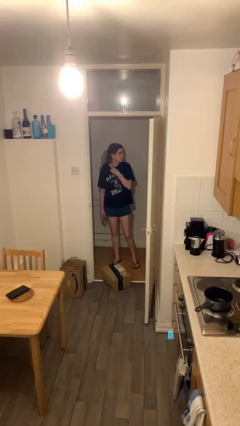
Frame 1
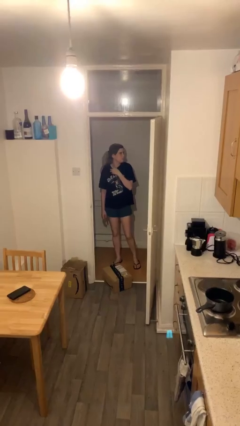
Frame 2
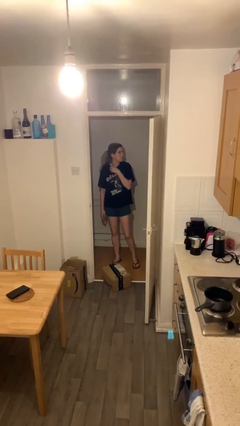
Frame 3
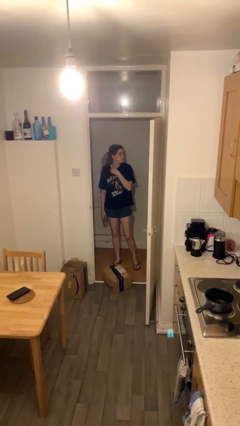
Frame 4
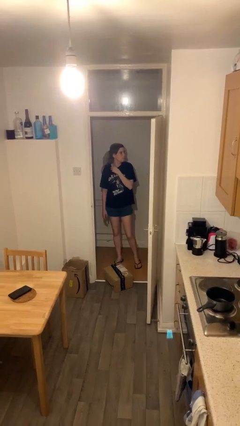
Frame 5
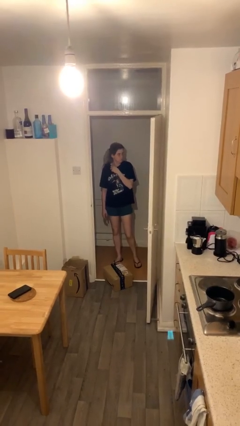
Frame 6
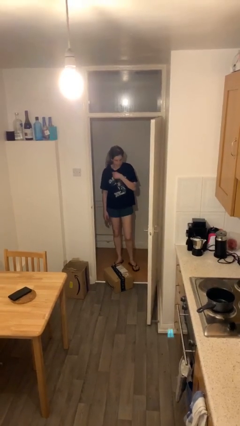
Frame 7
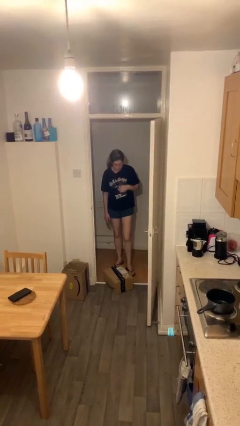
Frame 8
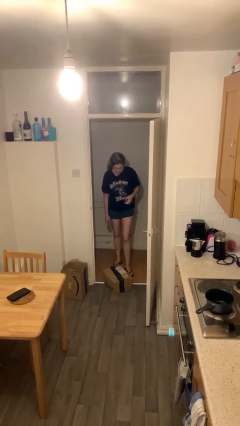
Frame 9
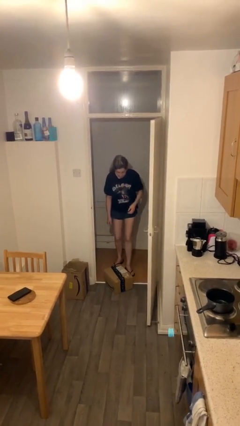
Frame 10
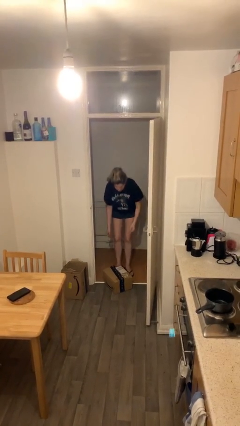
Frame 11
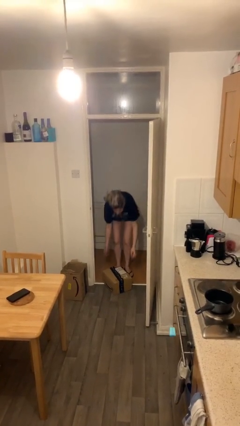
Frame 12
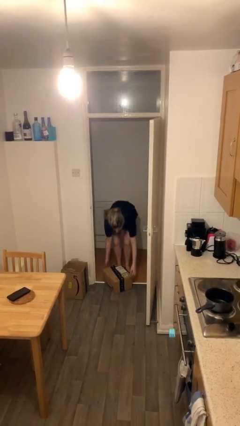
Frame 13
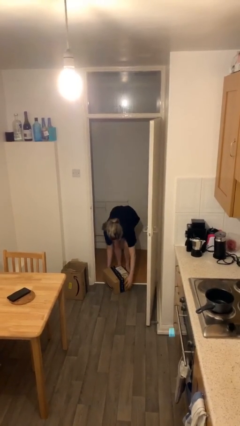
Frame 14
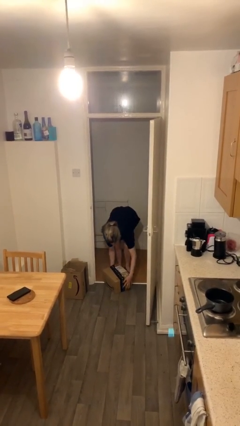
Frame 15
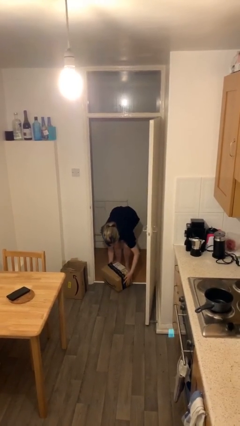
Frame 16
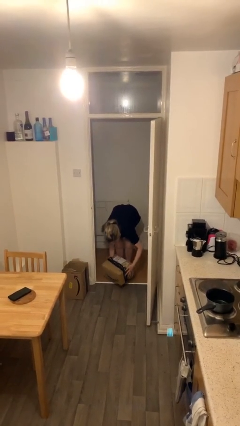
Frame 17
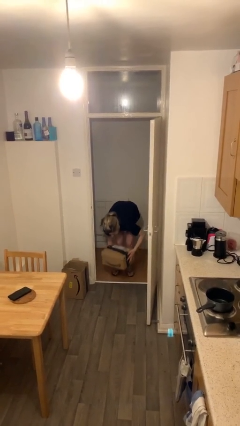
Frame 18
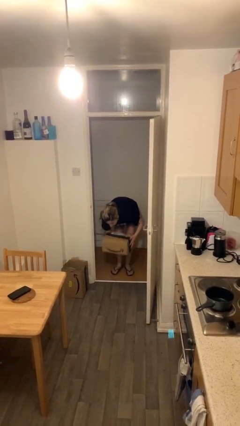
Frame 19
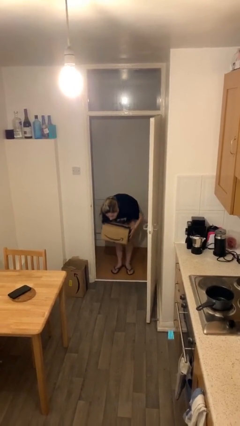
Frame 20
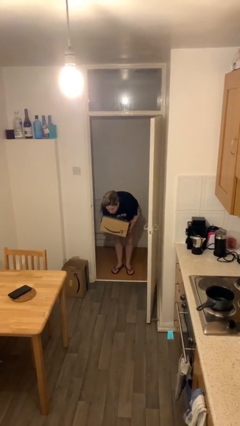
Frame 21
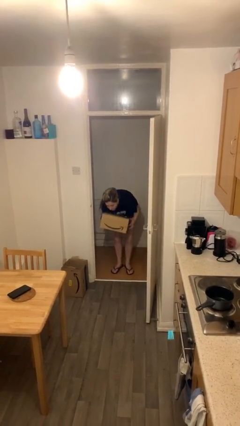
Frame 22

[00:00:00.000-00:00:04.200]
person picks up object from floor

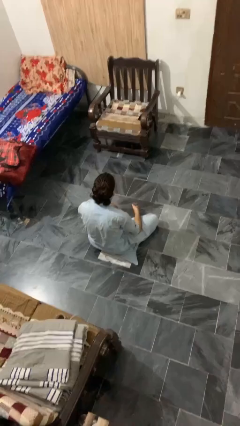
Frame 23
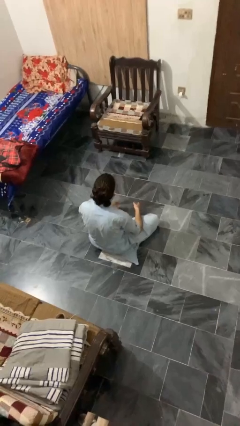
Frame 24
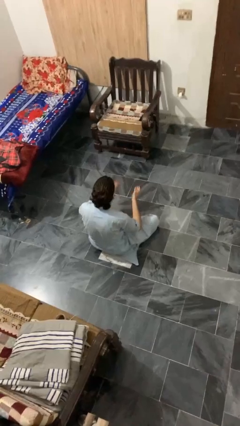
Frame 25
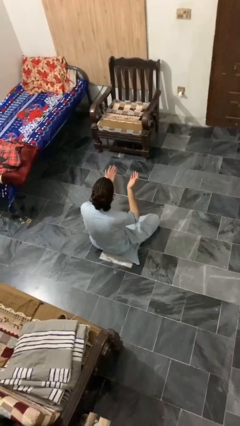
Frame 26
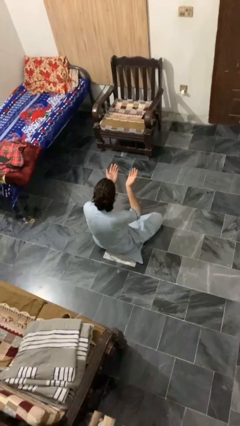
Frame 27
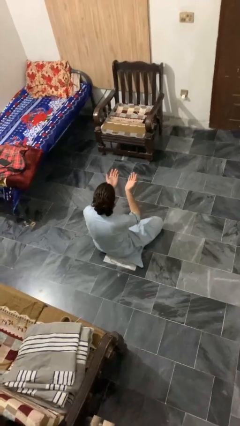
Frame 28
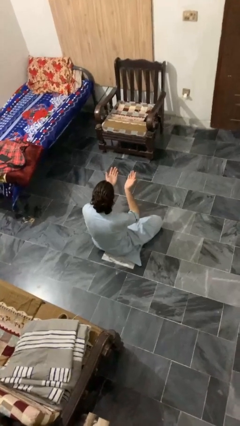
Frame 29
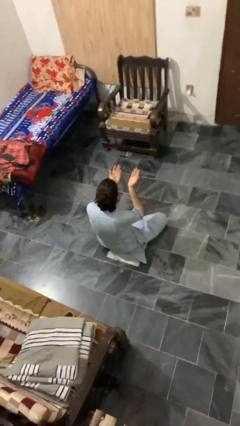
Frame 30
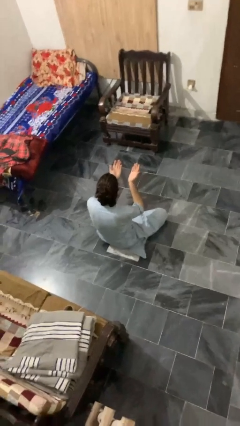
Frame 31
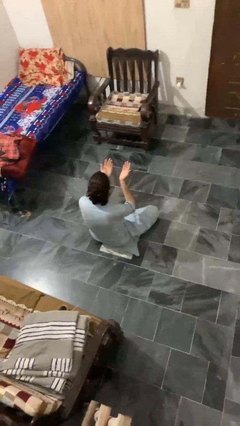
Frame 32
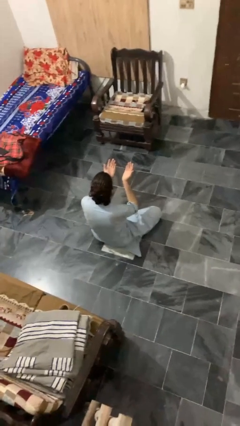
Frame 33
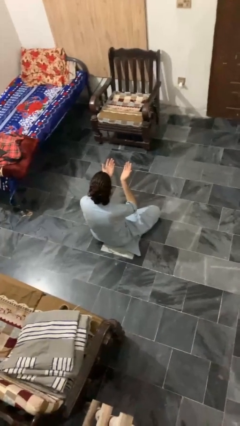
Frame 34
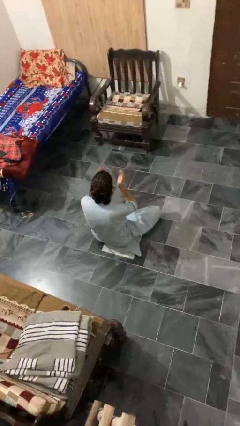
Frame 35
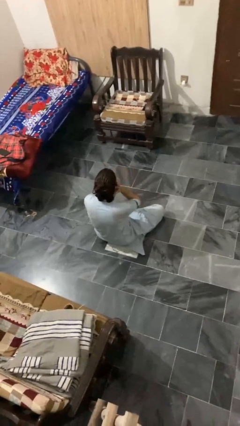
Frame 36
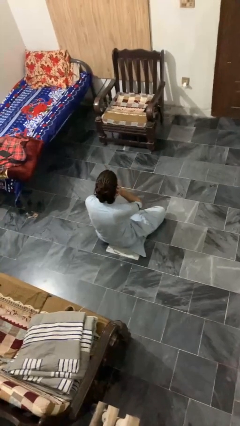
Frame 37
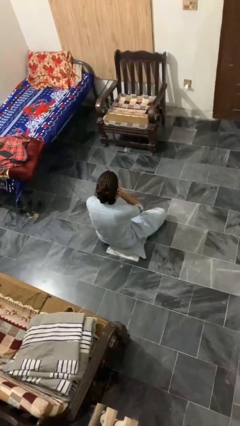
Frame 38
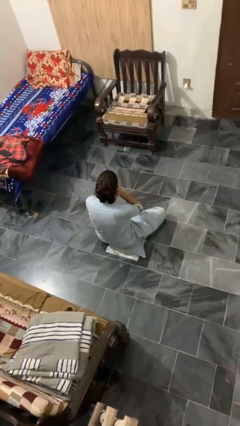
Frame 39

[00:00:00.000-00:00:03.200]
person prays

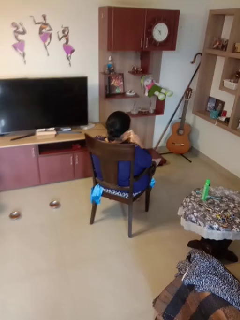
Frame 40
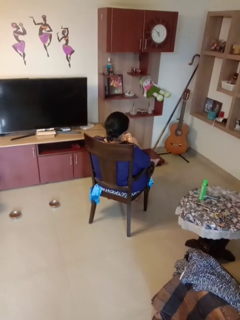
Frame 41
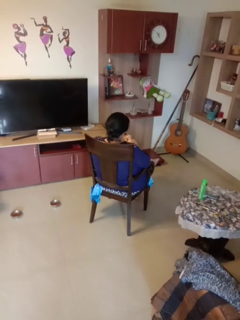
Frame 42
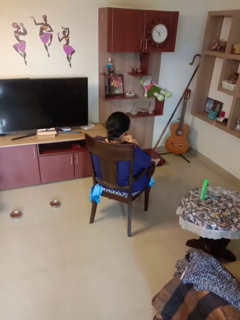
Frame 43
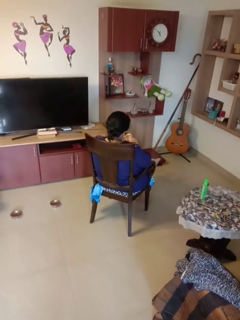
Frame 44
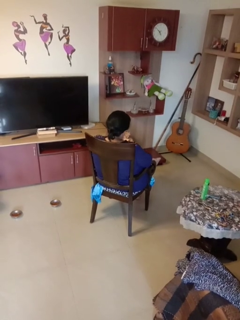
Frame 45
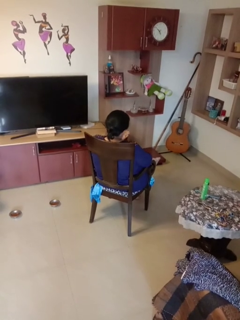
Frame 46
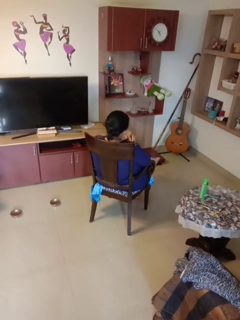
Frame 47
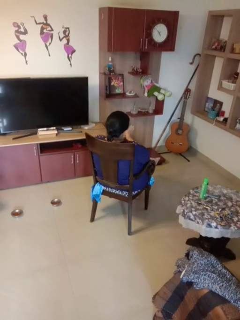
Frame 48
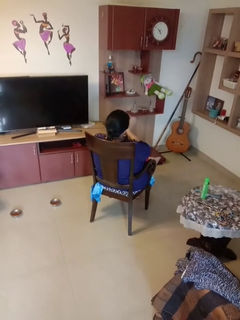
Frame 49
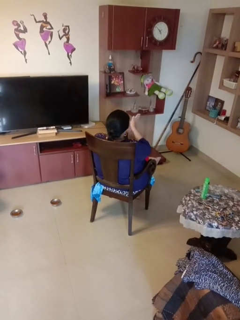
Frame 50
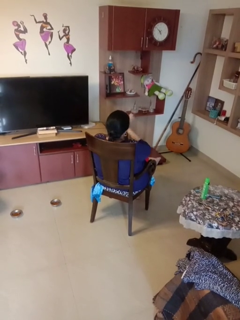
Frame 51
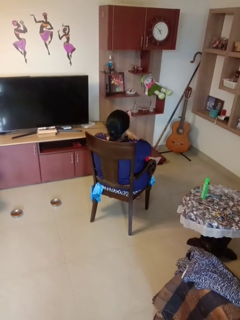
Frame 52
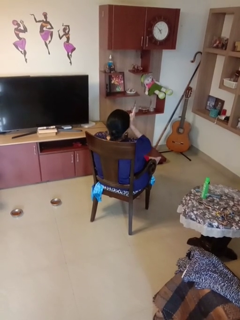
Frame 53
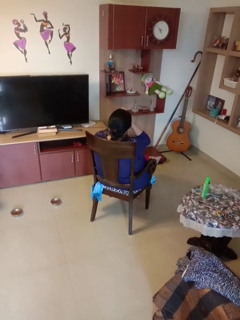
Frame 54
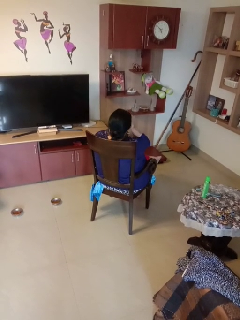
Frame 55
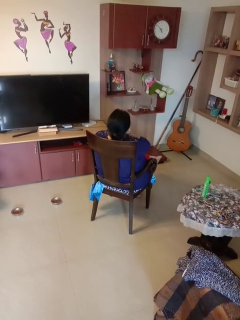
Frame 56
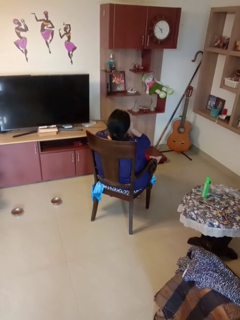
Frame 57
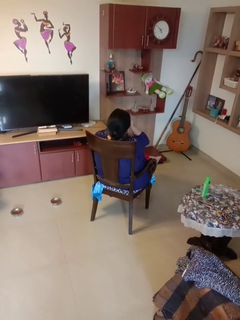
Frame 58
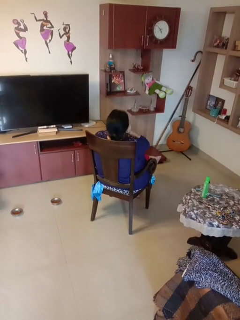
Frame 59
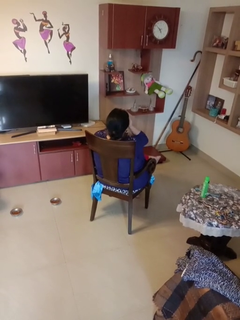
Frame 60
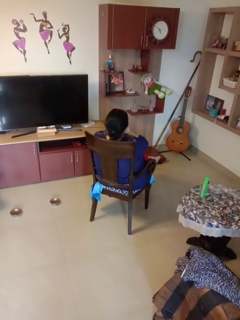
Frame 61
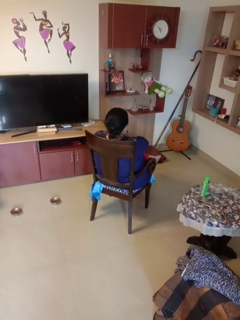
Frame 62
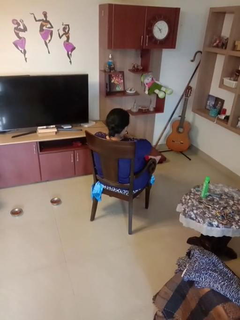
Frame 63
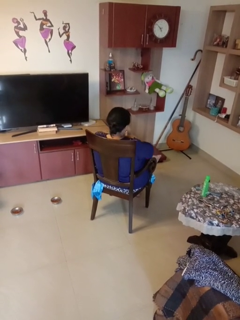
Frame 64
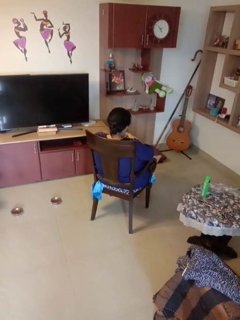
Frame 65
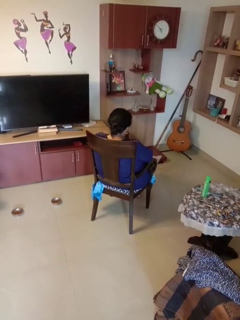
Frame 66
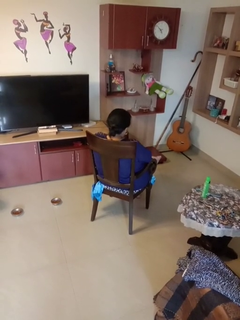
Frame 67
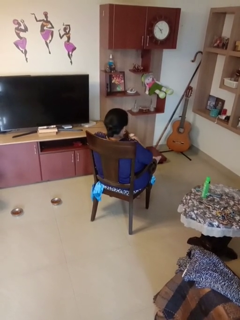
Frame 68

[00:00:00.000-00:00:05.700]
person applies facial moisturizer

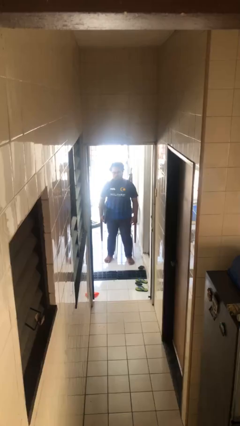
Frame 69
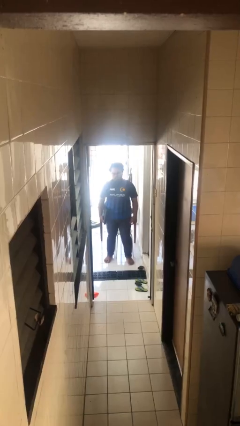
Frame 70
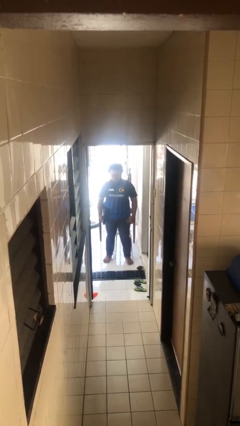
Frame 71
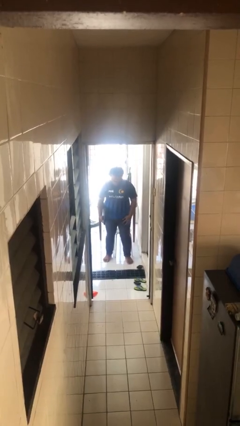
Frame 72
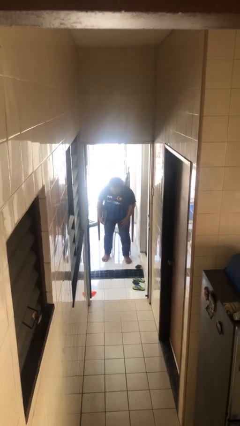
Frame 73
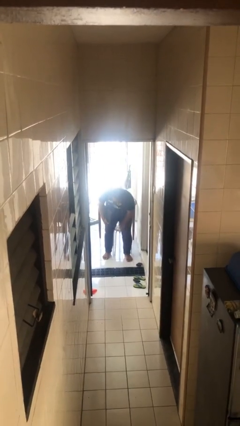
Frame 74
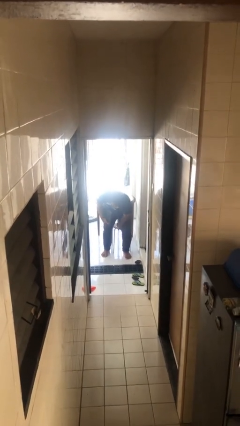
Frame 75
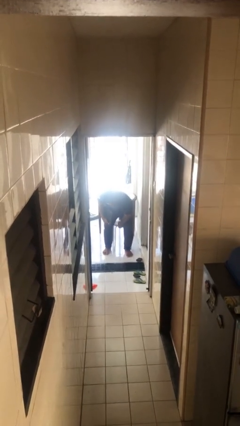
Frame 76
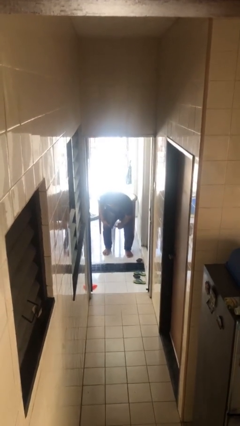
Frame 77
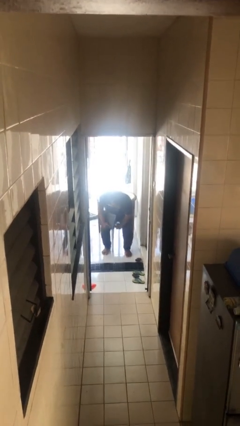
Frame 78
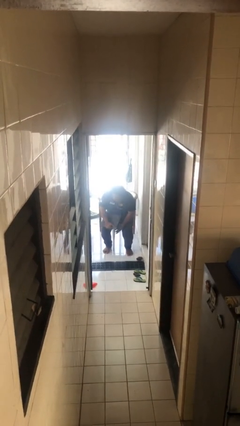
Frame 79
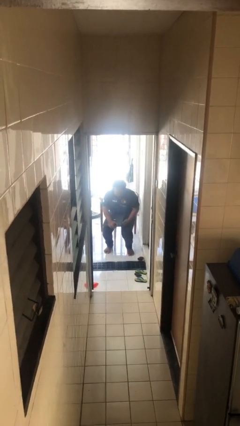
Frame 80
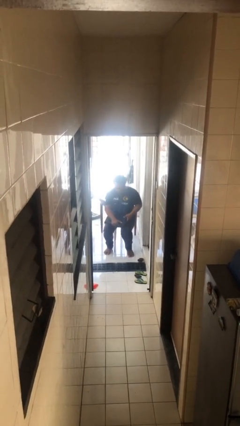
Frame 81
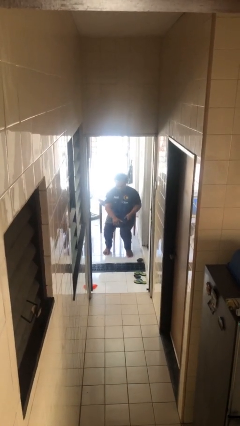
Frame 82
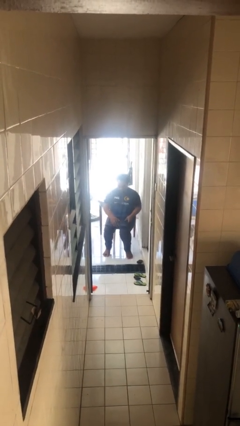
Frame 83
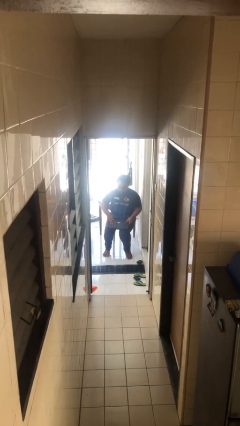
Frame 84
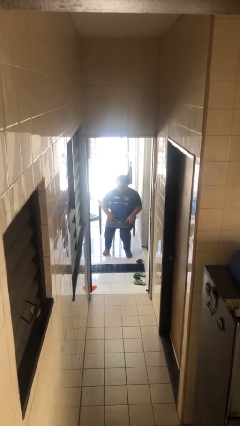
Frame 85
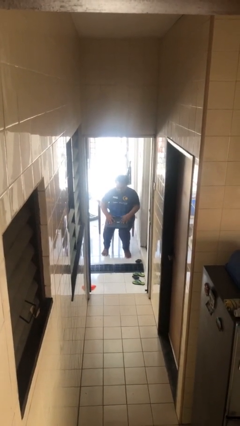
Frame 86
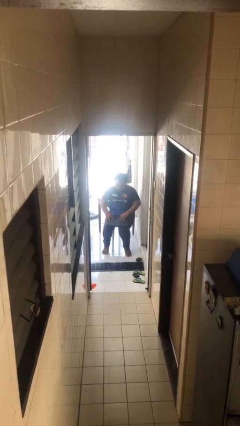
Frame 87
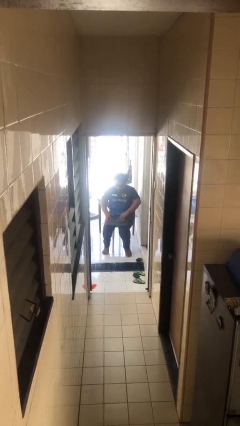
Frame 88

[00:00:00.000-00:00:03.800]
person sits down

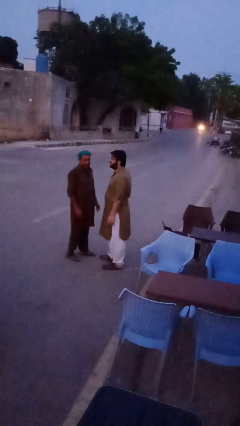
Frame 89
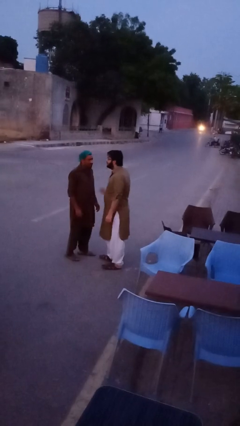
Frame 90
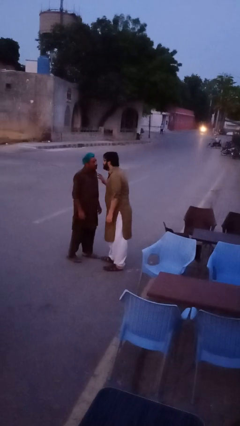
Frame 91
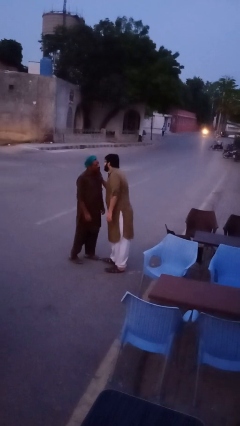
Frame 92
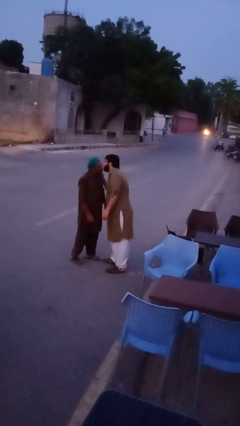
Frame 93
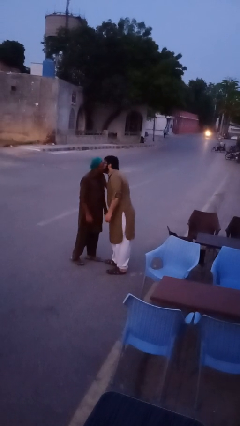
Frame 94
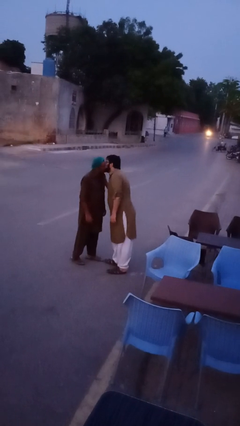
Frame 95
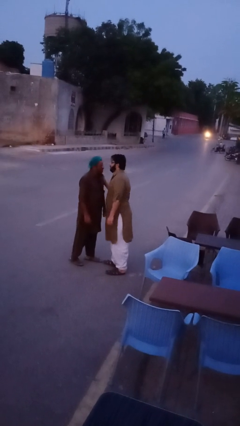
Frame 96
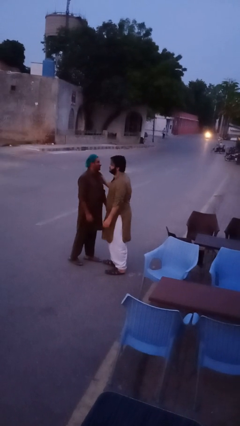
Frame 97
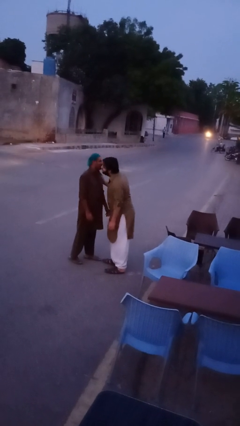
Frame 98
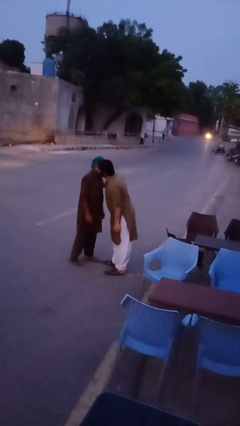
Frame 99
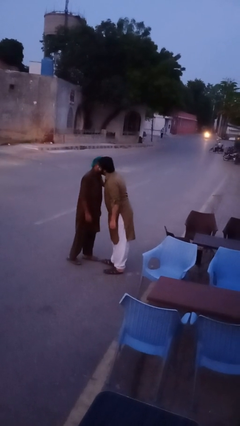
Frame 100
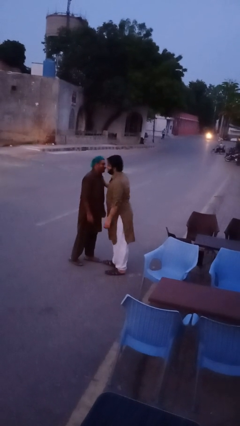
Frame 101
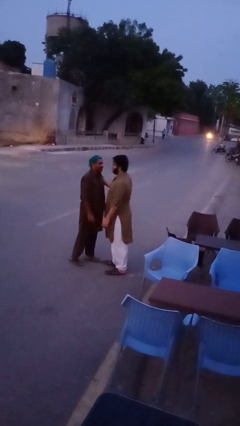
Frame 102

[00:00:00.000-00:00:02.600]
person kisses cheek of person
